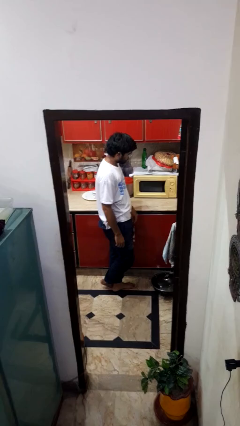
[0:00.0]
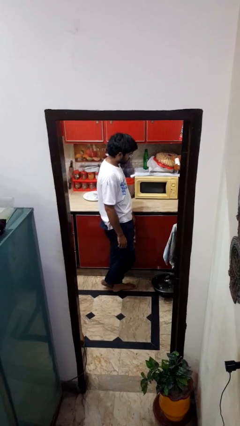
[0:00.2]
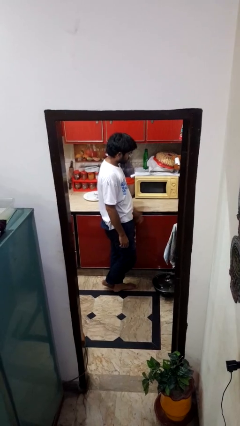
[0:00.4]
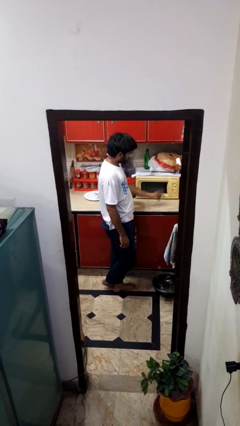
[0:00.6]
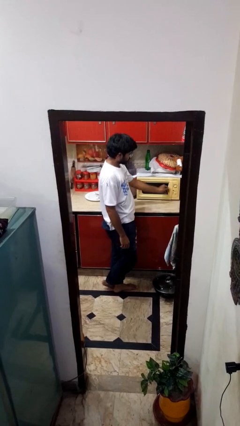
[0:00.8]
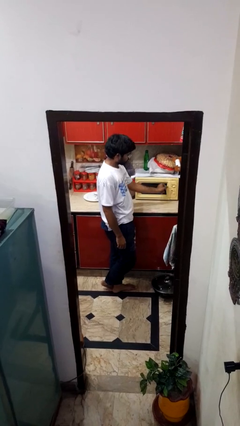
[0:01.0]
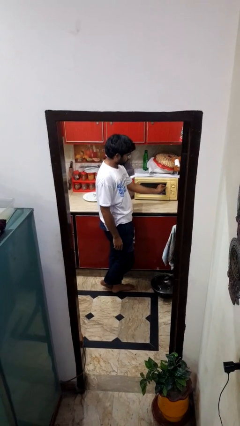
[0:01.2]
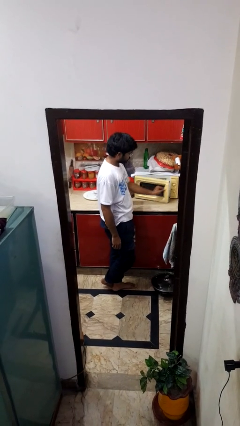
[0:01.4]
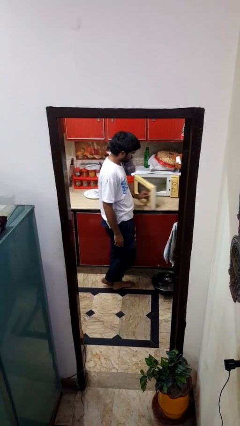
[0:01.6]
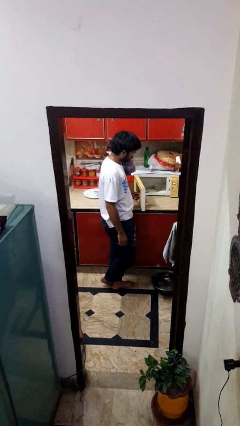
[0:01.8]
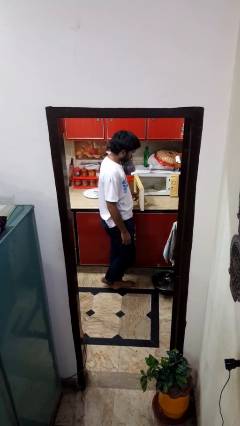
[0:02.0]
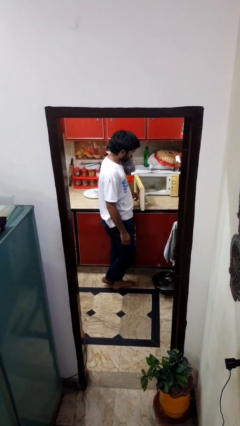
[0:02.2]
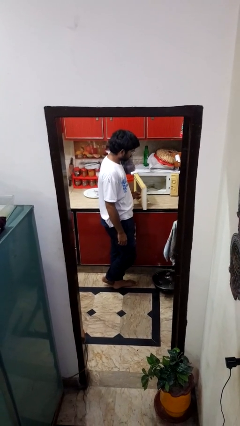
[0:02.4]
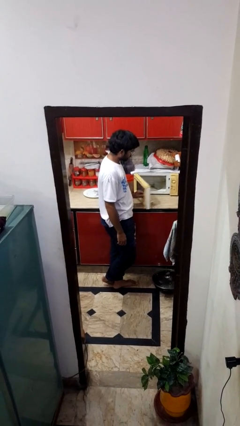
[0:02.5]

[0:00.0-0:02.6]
person opens oven door

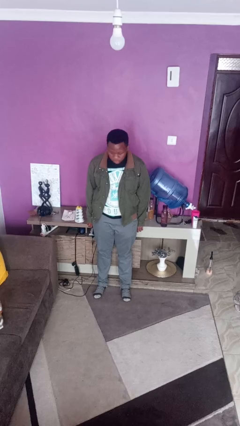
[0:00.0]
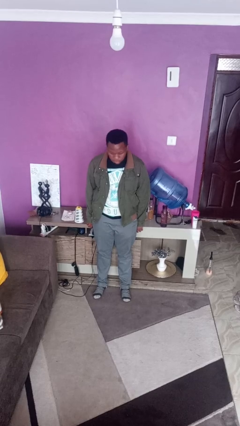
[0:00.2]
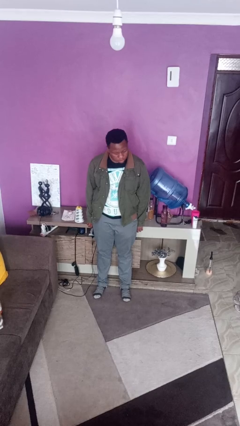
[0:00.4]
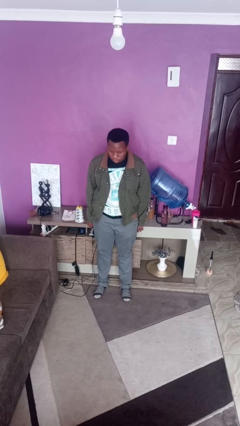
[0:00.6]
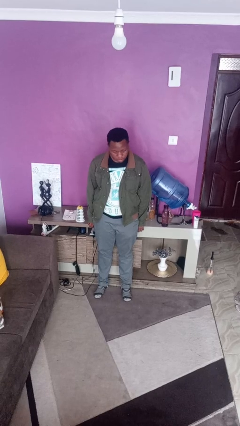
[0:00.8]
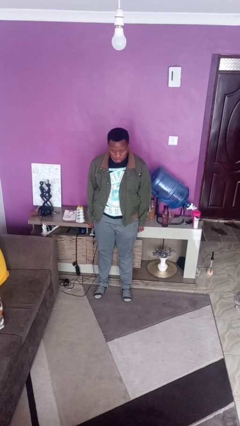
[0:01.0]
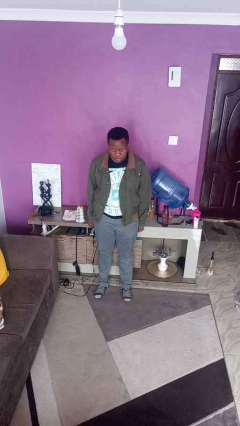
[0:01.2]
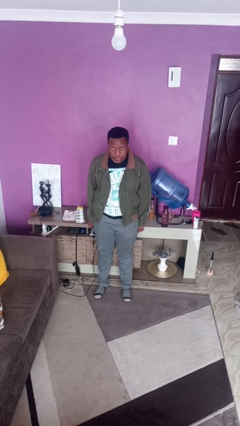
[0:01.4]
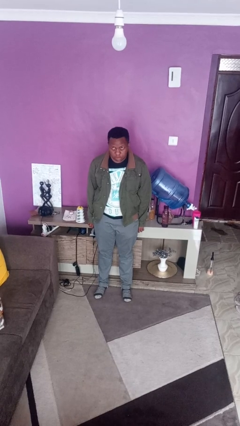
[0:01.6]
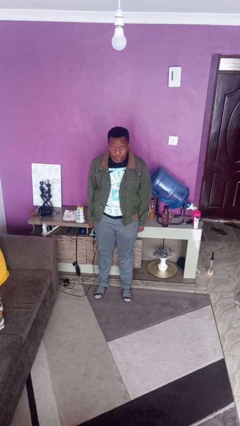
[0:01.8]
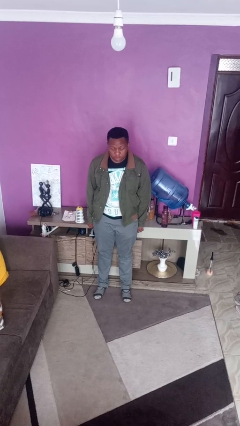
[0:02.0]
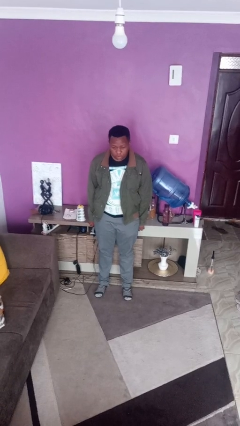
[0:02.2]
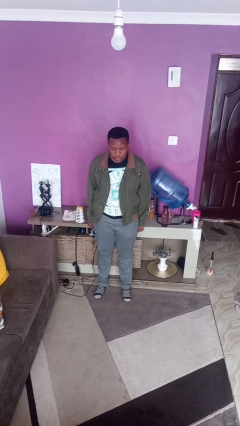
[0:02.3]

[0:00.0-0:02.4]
person shakes head

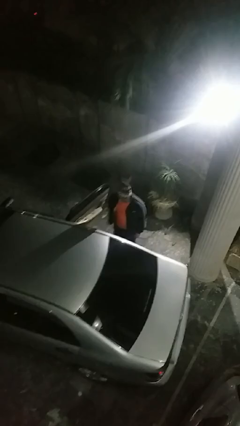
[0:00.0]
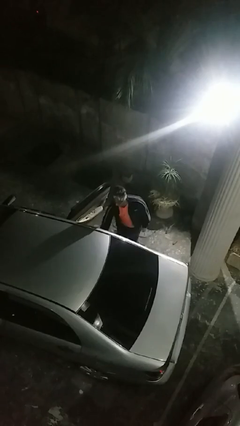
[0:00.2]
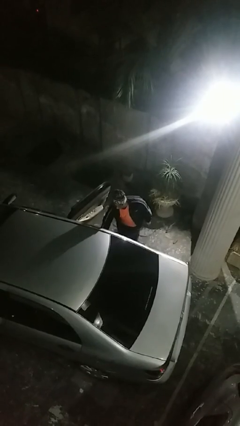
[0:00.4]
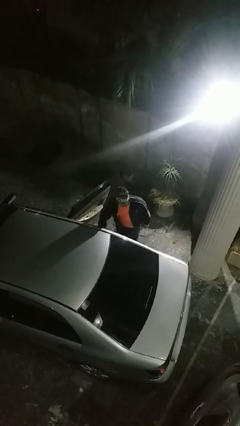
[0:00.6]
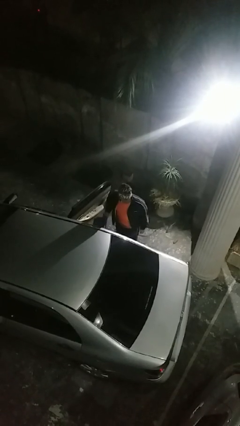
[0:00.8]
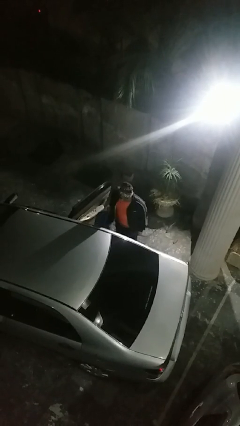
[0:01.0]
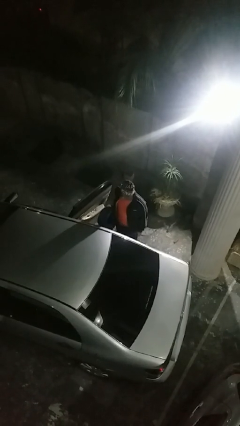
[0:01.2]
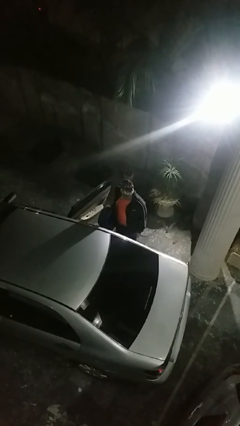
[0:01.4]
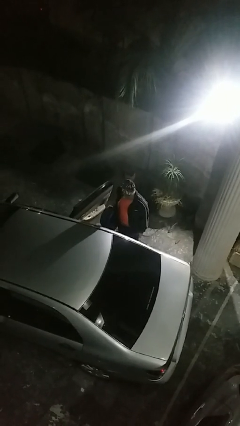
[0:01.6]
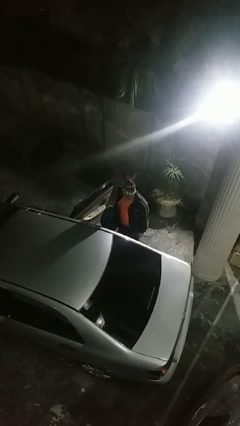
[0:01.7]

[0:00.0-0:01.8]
person unloads car

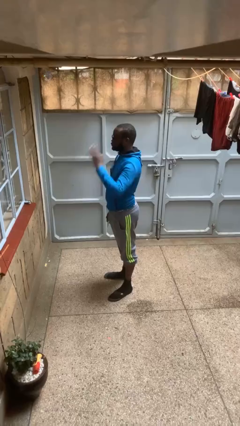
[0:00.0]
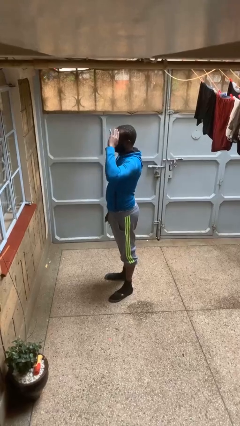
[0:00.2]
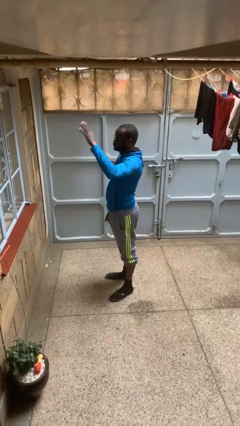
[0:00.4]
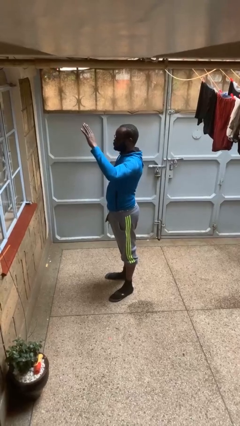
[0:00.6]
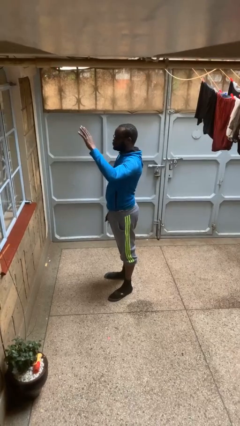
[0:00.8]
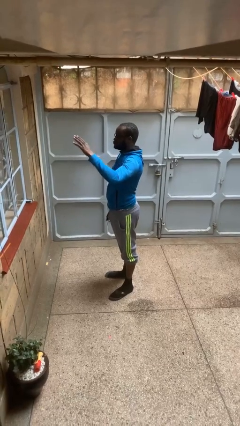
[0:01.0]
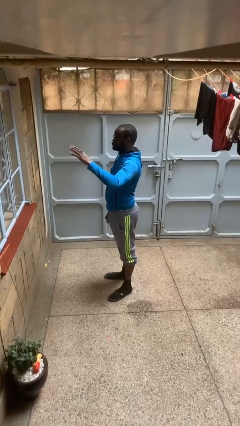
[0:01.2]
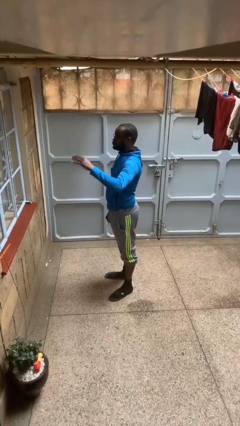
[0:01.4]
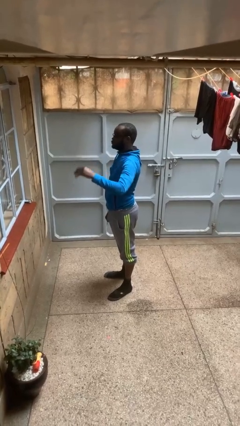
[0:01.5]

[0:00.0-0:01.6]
person salutes

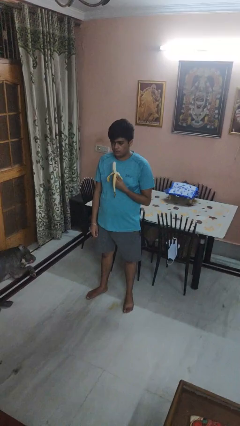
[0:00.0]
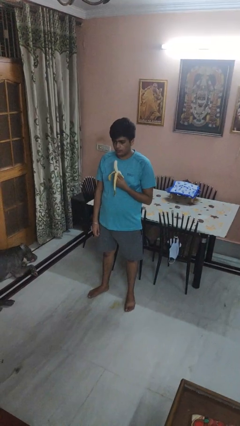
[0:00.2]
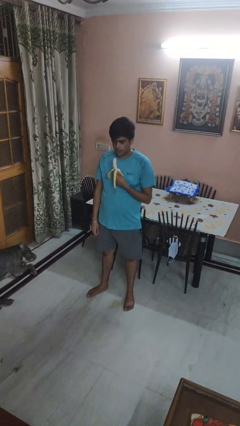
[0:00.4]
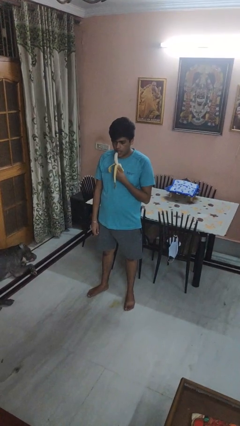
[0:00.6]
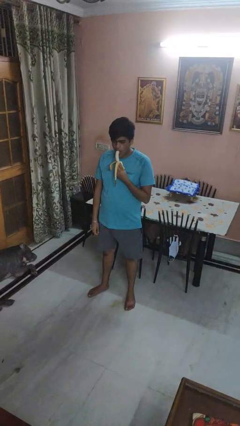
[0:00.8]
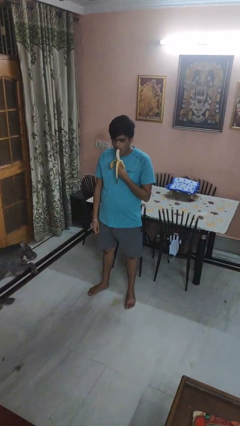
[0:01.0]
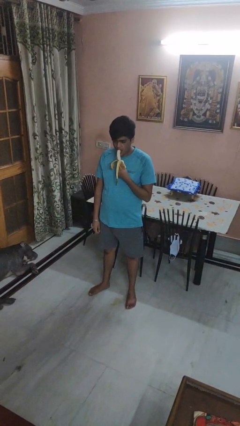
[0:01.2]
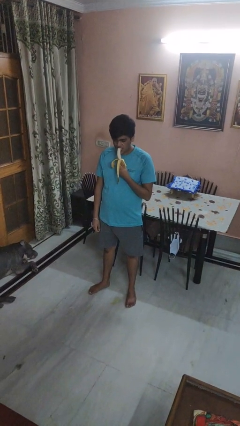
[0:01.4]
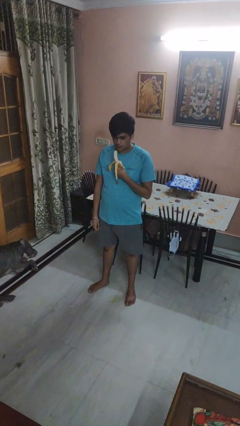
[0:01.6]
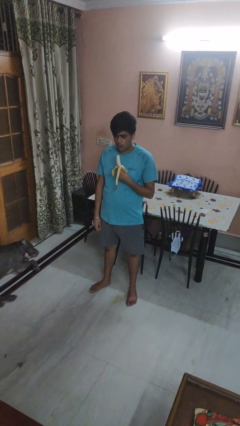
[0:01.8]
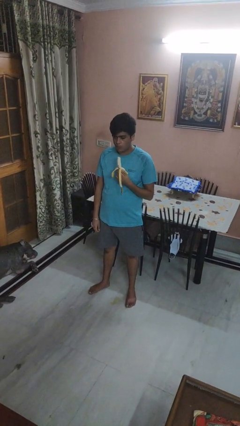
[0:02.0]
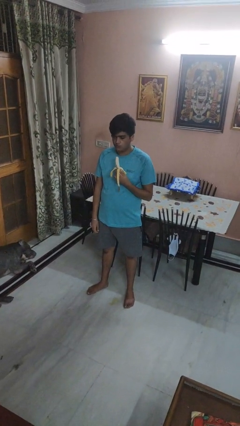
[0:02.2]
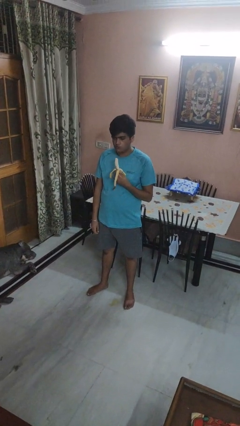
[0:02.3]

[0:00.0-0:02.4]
person eats banana

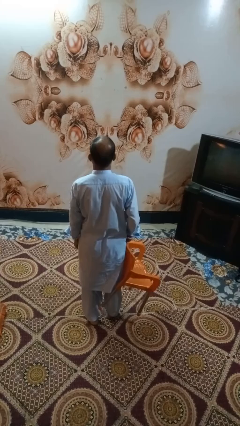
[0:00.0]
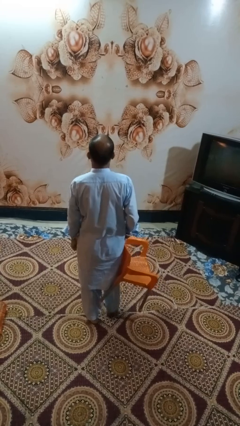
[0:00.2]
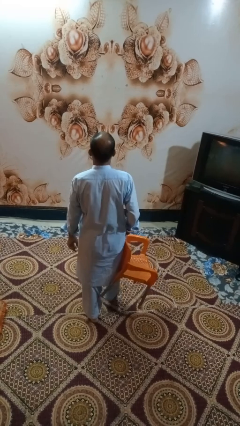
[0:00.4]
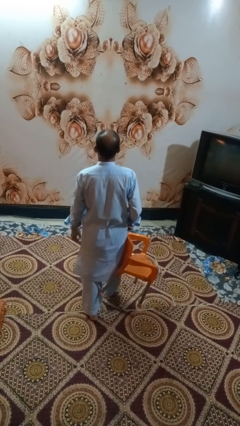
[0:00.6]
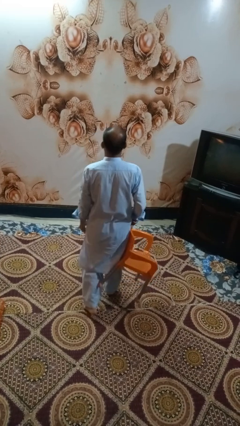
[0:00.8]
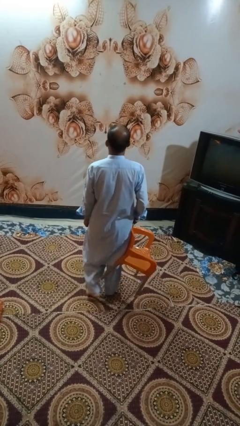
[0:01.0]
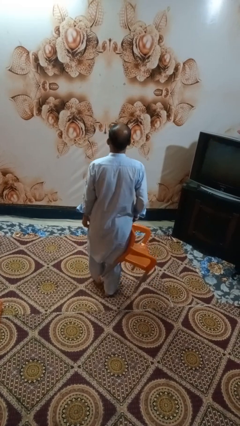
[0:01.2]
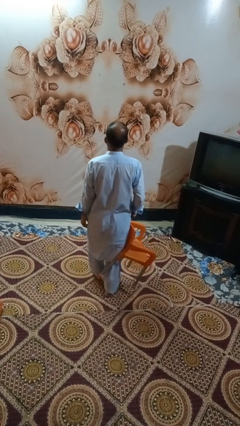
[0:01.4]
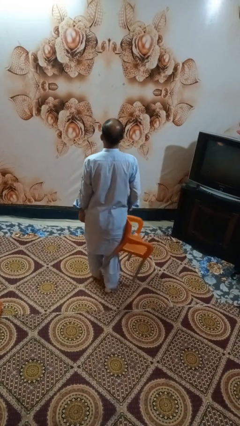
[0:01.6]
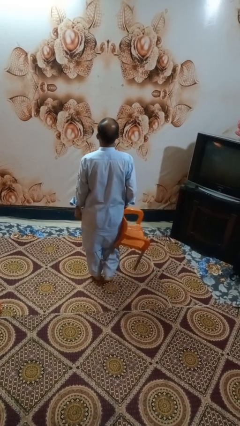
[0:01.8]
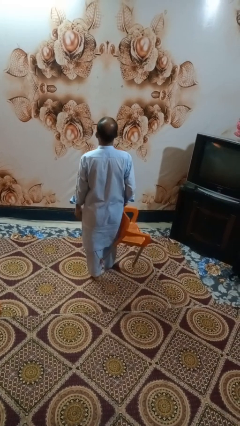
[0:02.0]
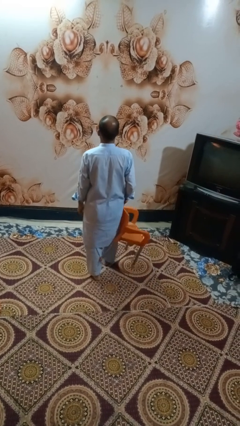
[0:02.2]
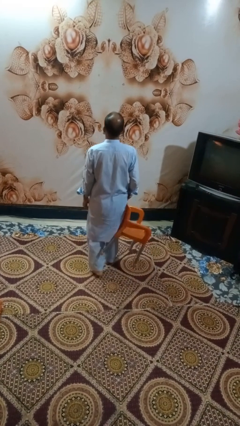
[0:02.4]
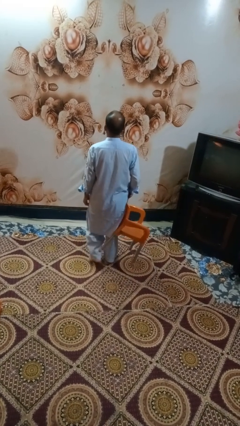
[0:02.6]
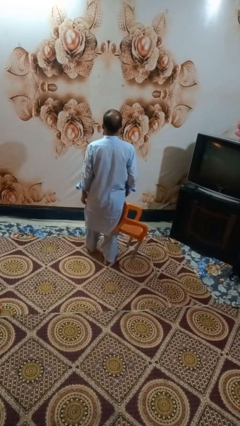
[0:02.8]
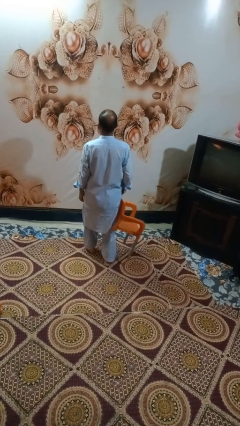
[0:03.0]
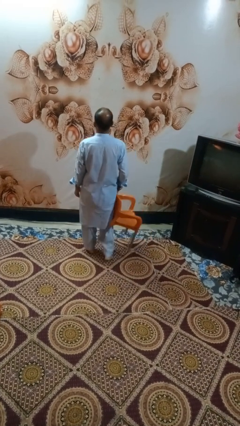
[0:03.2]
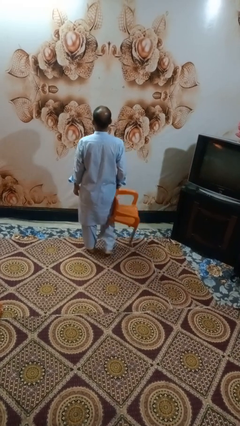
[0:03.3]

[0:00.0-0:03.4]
person carries furniture

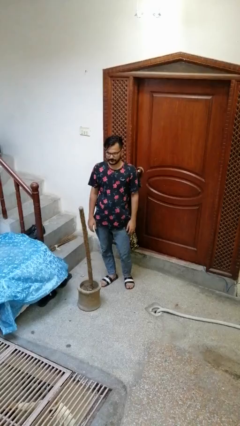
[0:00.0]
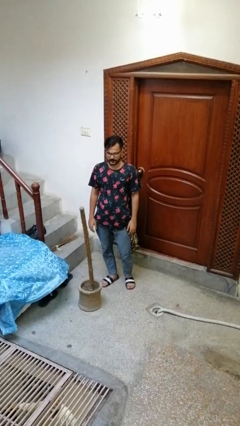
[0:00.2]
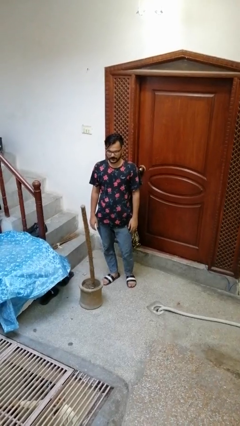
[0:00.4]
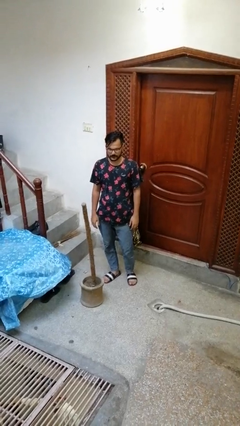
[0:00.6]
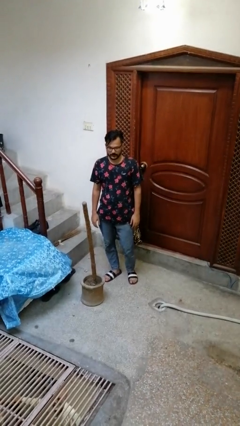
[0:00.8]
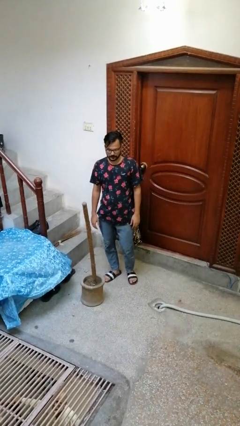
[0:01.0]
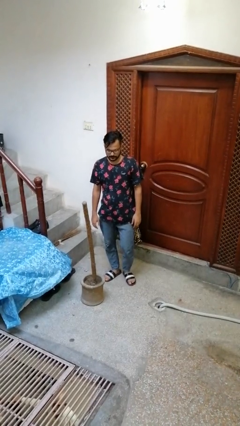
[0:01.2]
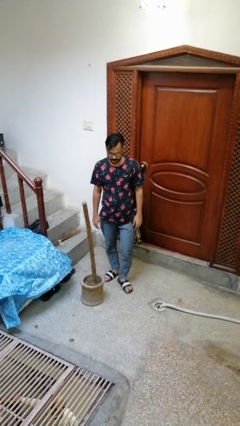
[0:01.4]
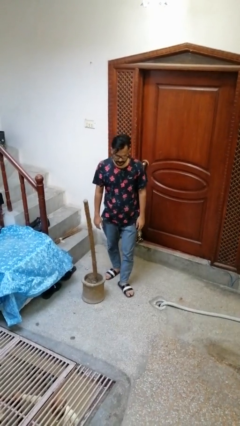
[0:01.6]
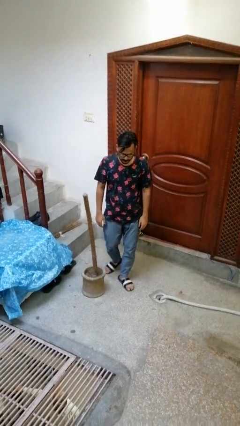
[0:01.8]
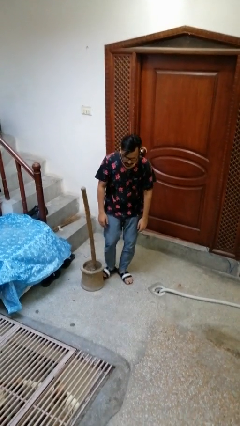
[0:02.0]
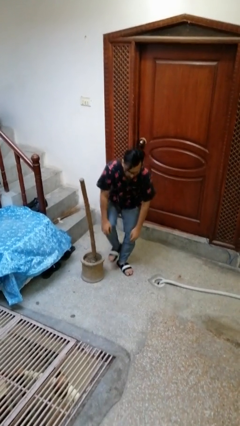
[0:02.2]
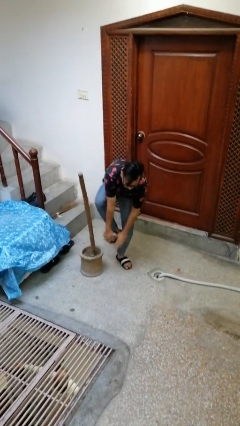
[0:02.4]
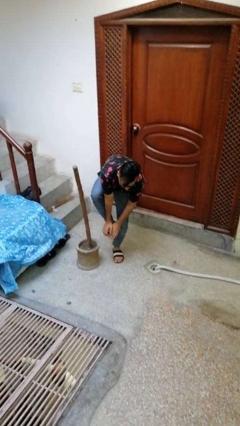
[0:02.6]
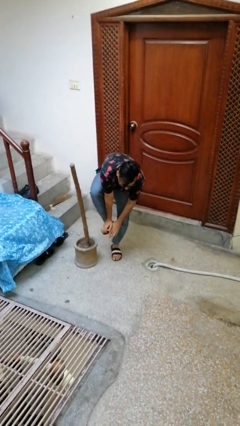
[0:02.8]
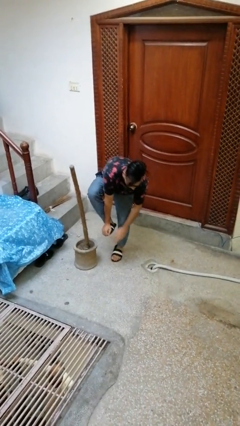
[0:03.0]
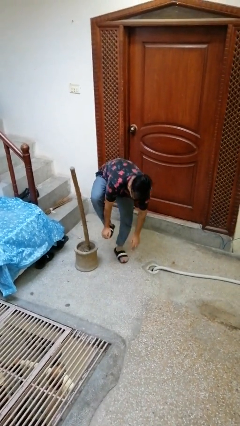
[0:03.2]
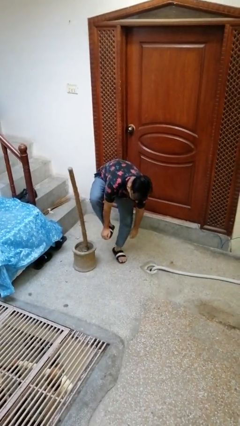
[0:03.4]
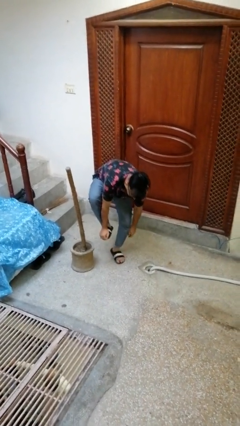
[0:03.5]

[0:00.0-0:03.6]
person trips on object on floor
